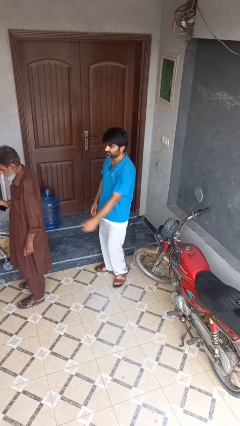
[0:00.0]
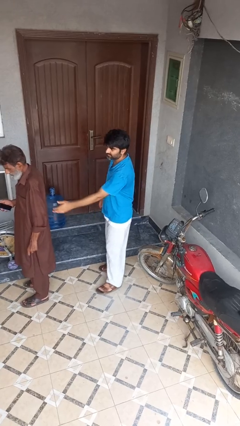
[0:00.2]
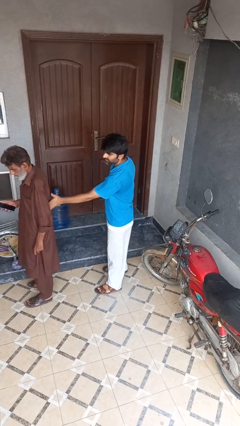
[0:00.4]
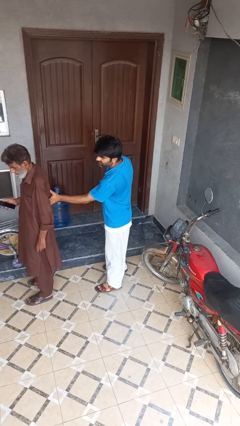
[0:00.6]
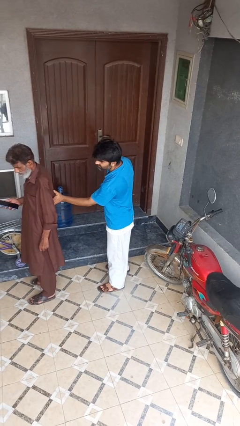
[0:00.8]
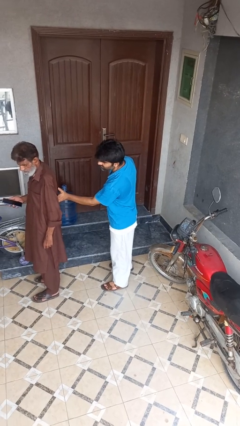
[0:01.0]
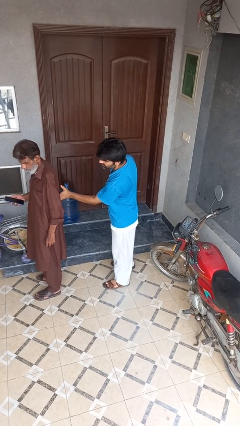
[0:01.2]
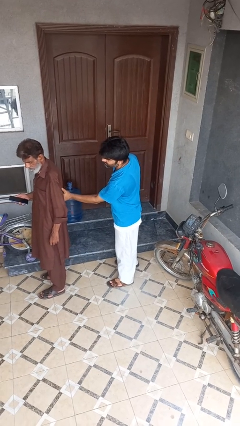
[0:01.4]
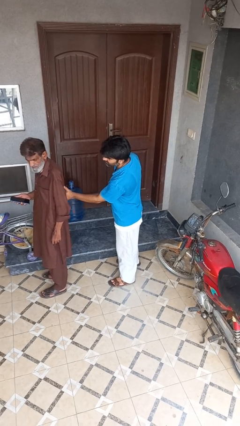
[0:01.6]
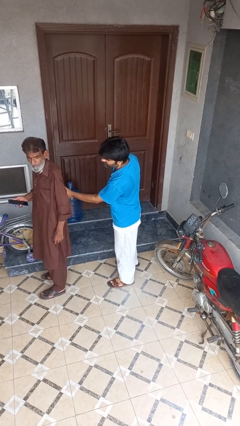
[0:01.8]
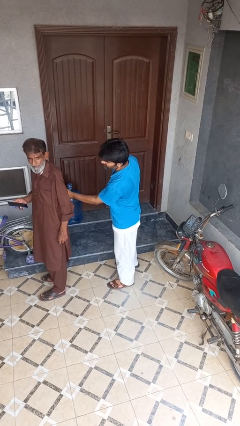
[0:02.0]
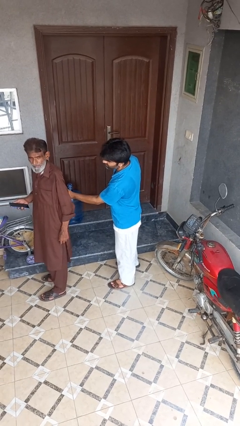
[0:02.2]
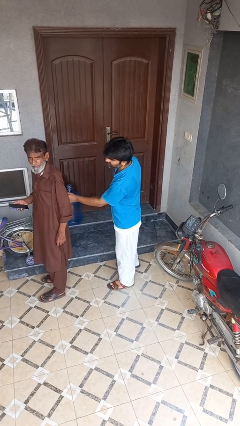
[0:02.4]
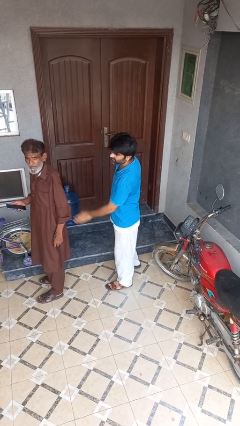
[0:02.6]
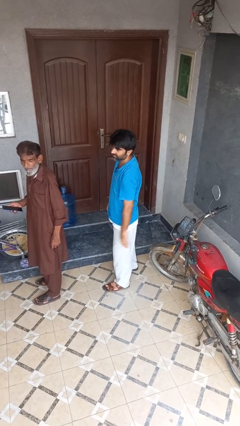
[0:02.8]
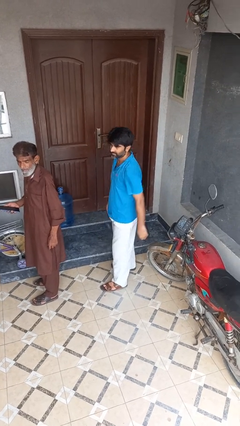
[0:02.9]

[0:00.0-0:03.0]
person touches back of person

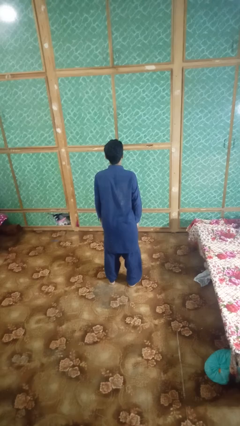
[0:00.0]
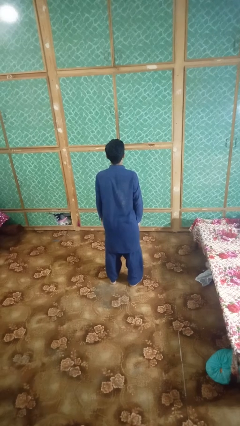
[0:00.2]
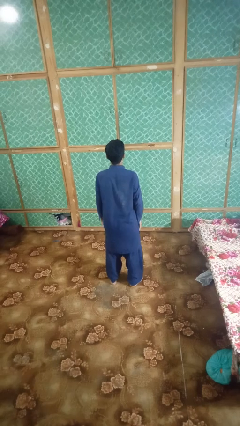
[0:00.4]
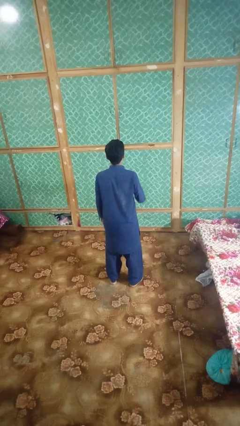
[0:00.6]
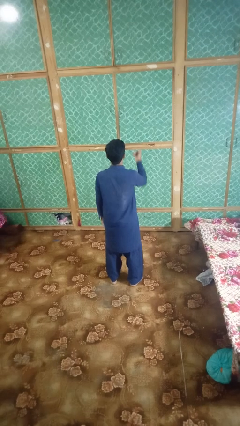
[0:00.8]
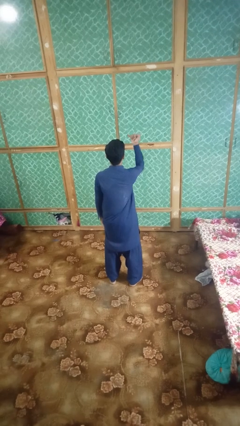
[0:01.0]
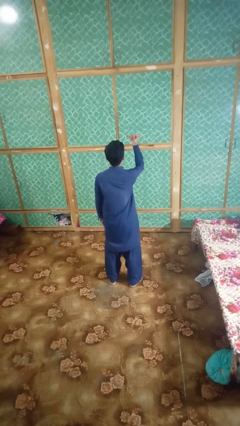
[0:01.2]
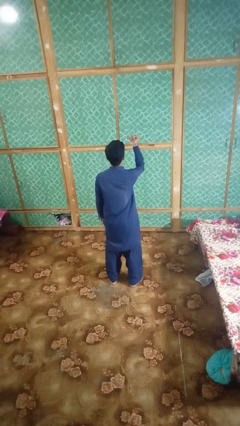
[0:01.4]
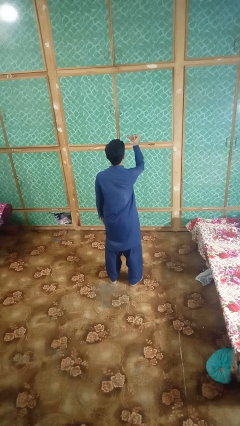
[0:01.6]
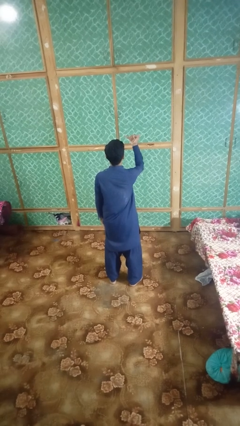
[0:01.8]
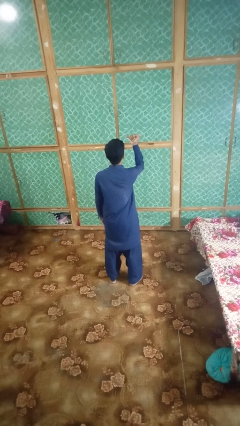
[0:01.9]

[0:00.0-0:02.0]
person gestures hang loose

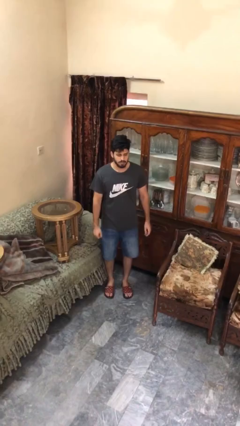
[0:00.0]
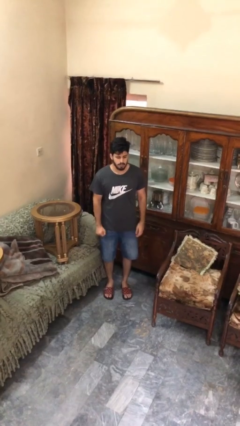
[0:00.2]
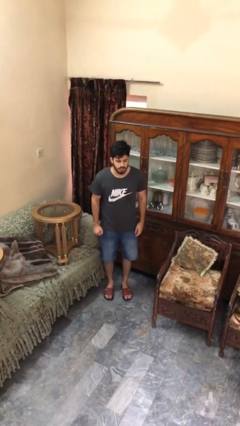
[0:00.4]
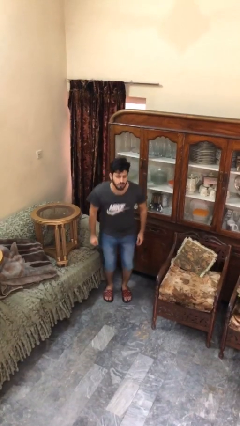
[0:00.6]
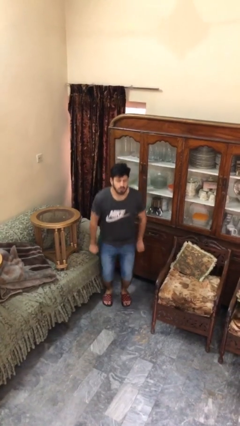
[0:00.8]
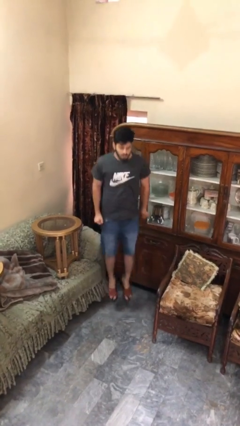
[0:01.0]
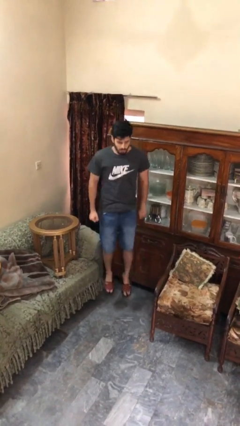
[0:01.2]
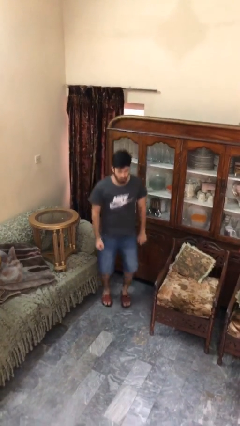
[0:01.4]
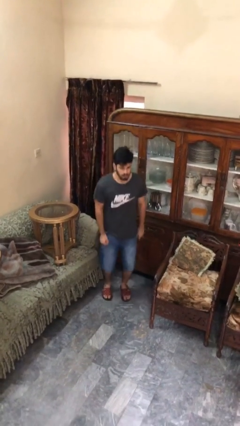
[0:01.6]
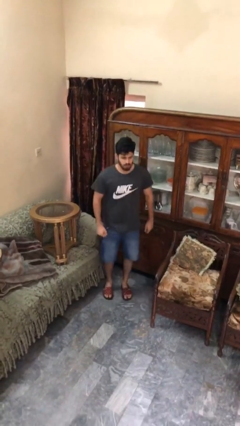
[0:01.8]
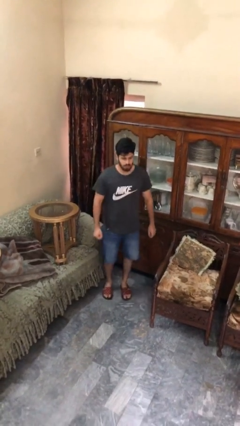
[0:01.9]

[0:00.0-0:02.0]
person jumps

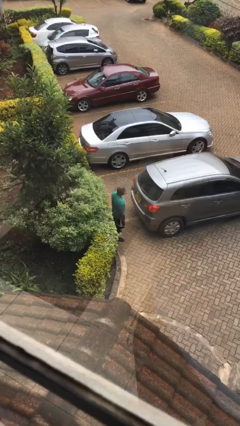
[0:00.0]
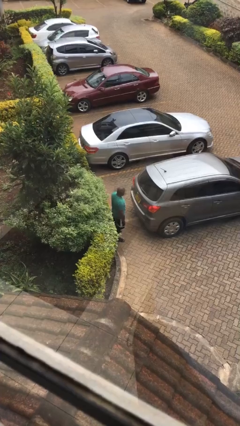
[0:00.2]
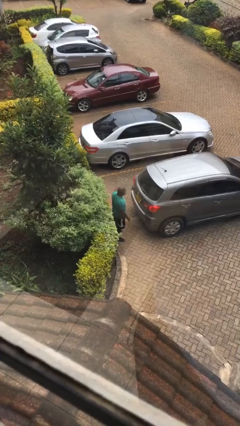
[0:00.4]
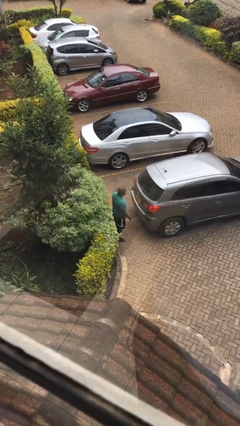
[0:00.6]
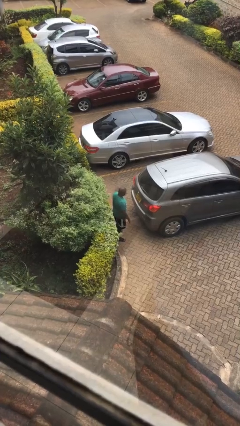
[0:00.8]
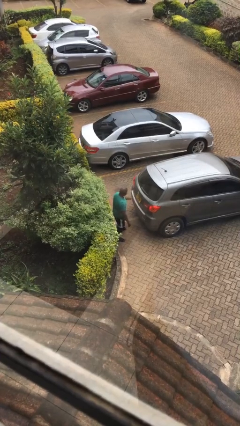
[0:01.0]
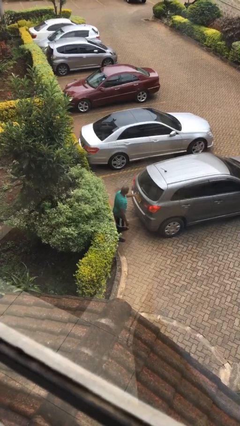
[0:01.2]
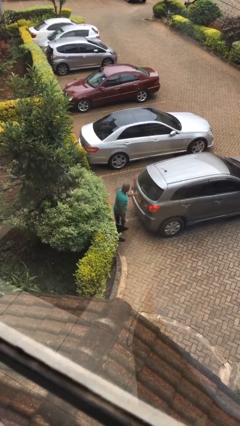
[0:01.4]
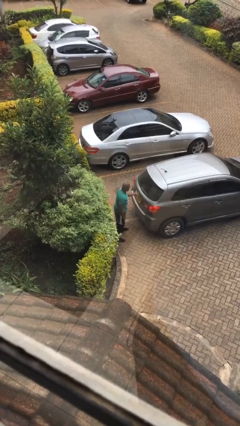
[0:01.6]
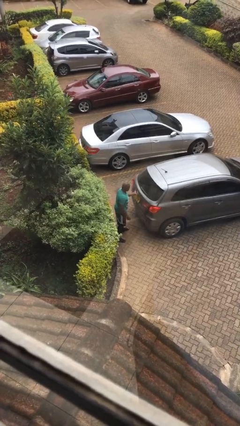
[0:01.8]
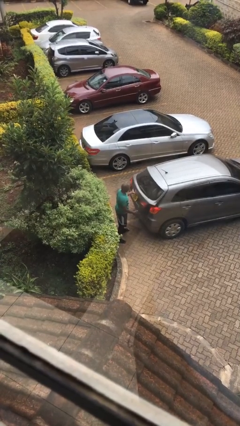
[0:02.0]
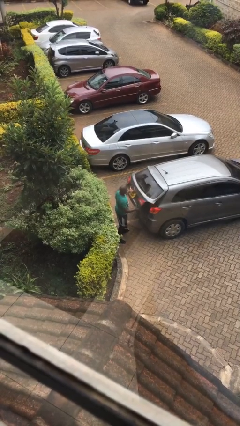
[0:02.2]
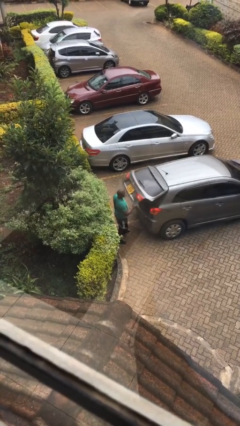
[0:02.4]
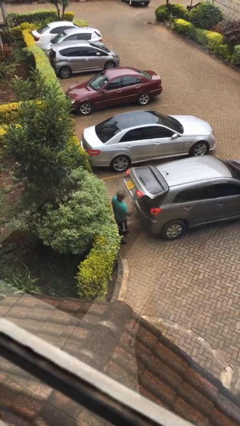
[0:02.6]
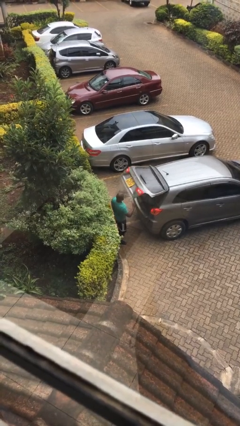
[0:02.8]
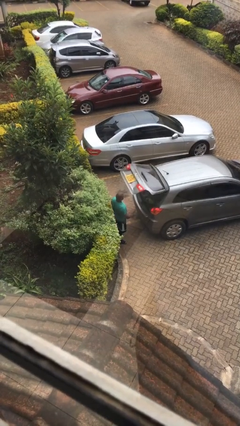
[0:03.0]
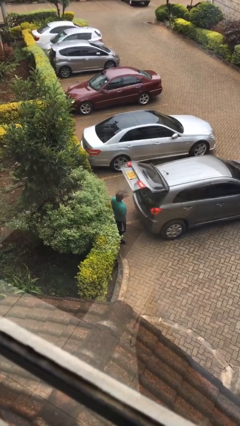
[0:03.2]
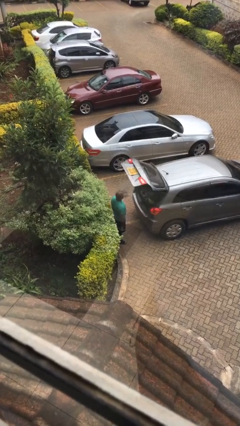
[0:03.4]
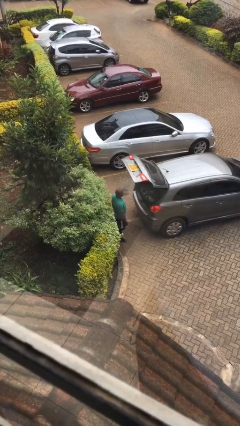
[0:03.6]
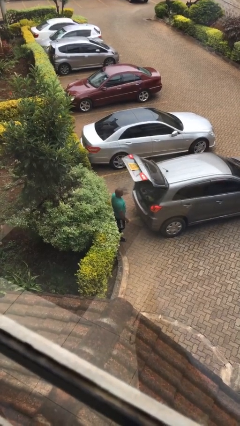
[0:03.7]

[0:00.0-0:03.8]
person opens car trunk

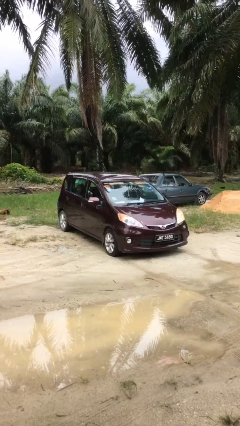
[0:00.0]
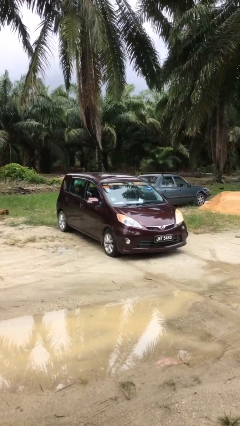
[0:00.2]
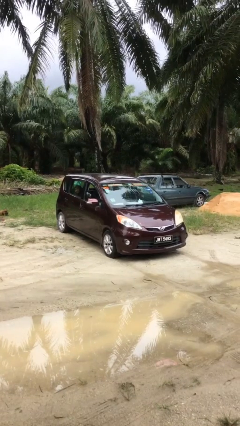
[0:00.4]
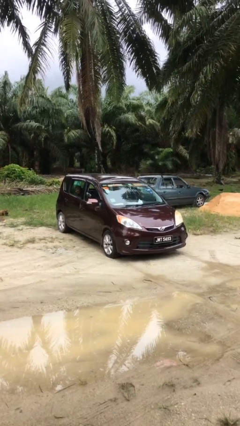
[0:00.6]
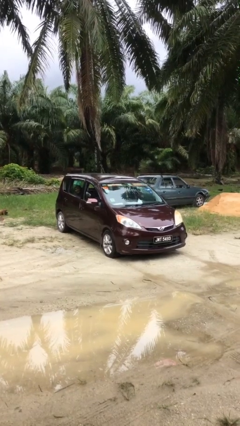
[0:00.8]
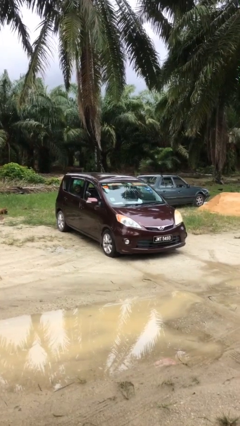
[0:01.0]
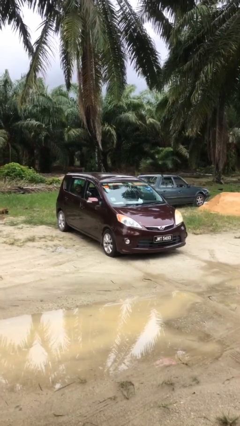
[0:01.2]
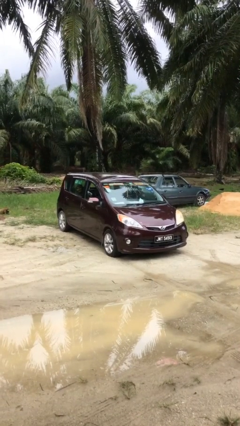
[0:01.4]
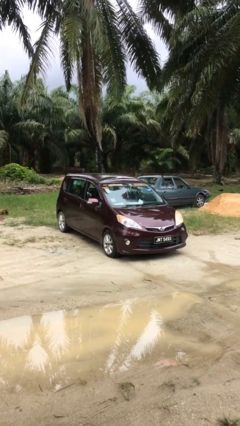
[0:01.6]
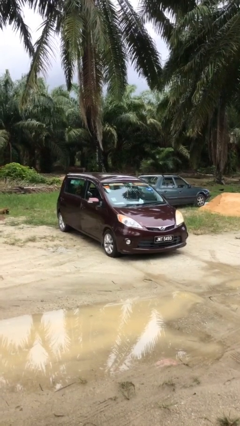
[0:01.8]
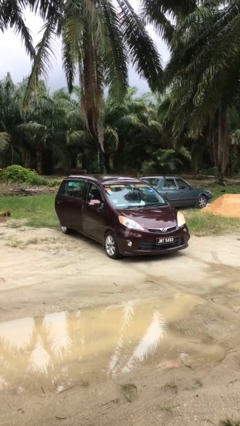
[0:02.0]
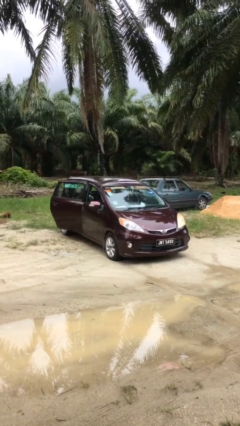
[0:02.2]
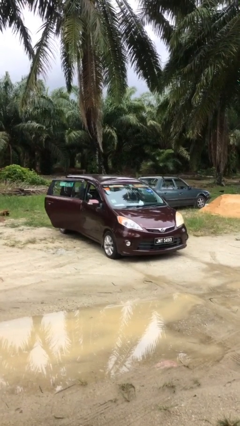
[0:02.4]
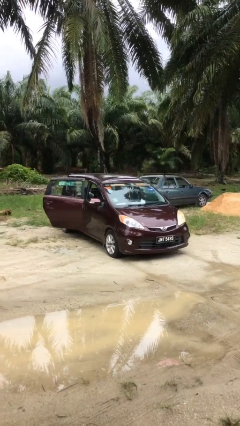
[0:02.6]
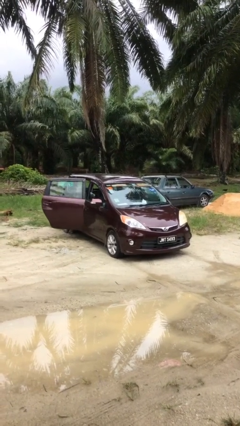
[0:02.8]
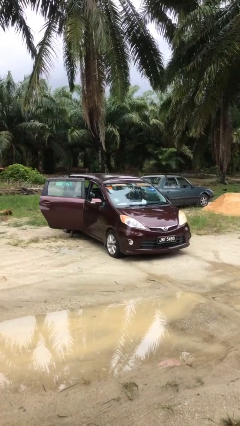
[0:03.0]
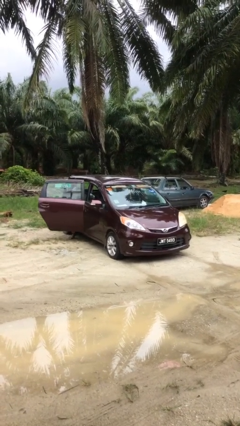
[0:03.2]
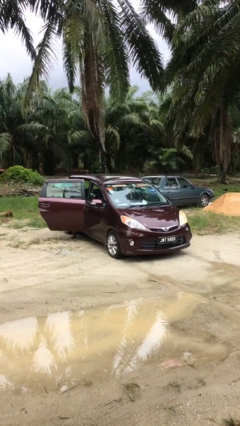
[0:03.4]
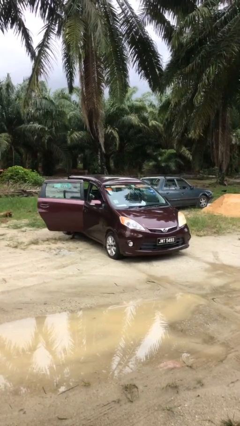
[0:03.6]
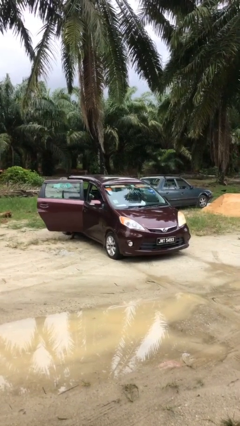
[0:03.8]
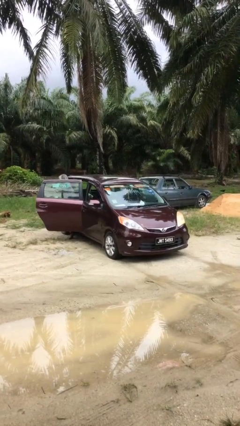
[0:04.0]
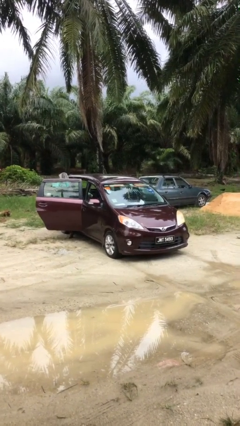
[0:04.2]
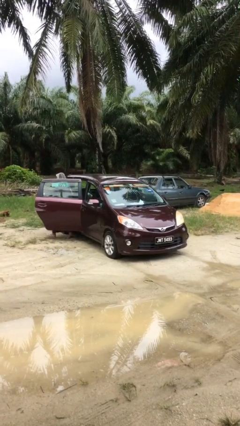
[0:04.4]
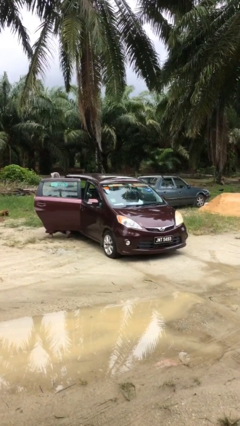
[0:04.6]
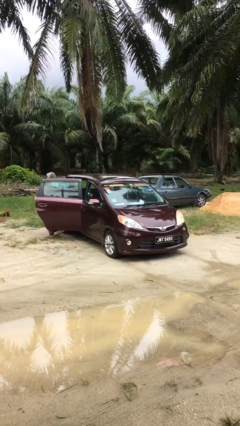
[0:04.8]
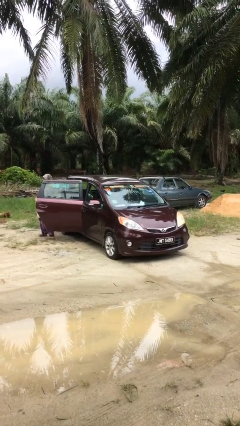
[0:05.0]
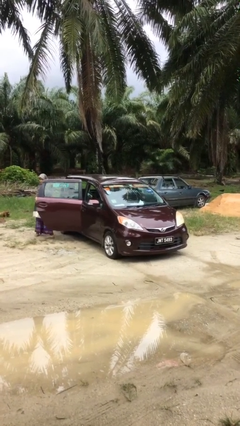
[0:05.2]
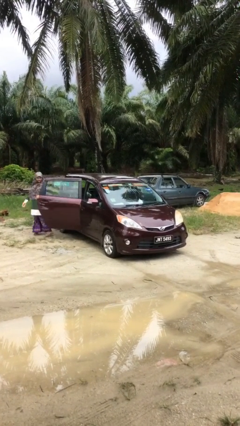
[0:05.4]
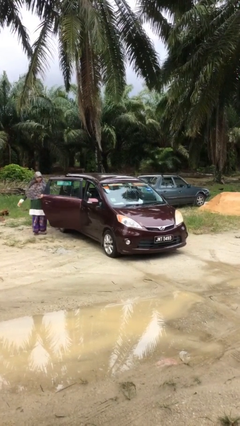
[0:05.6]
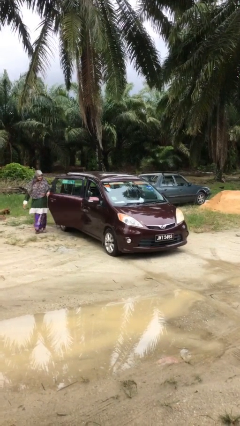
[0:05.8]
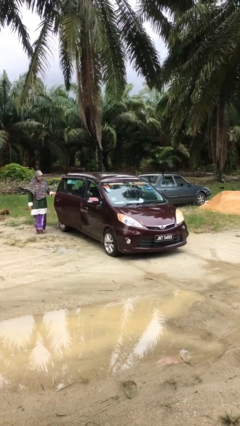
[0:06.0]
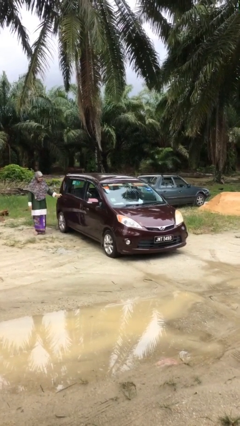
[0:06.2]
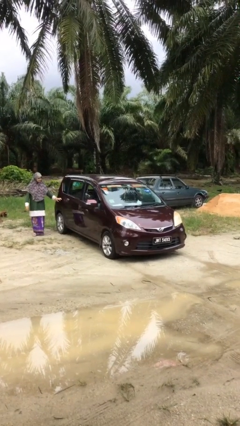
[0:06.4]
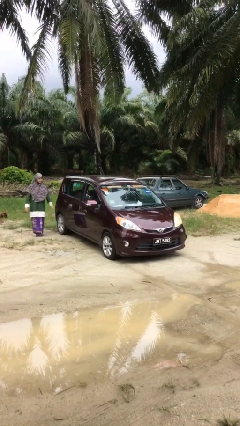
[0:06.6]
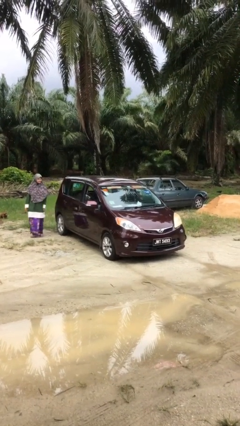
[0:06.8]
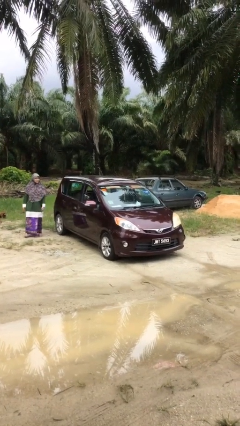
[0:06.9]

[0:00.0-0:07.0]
car drops off person
